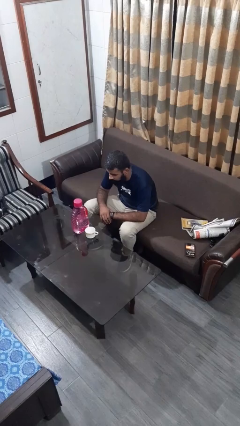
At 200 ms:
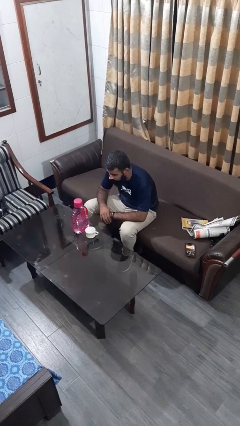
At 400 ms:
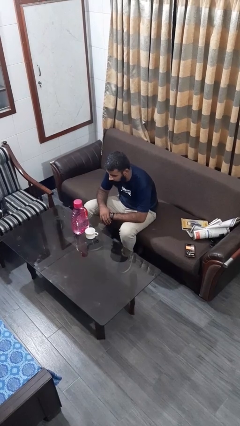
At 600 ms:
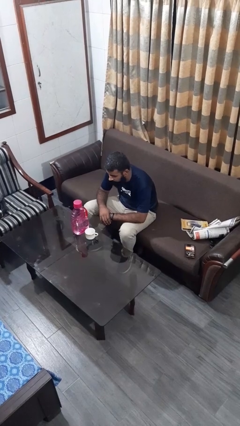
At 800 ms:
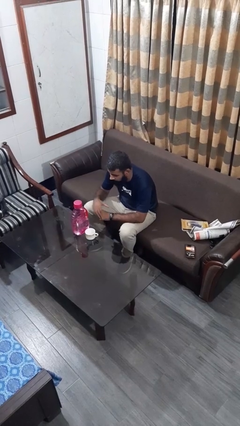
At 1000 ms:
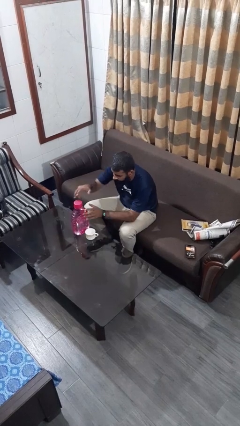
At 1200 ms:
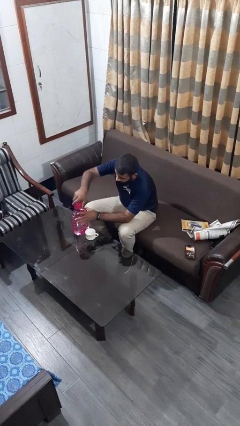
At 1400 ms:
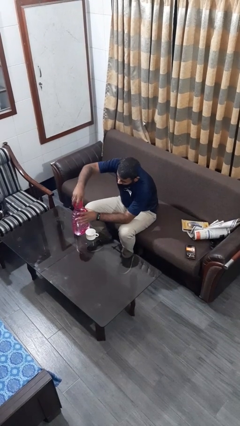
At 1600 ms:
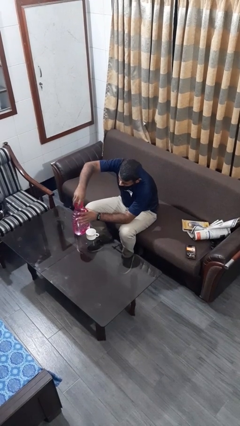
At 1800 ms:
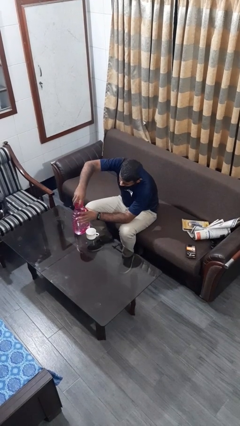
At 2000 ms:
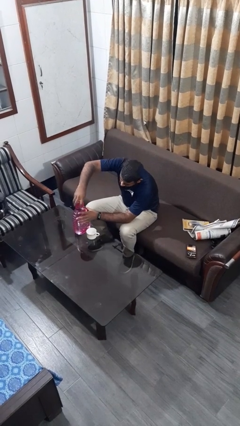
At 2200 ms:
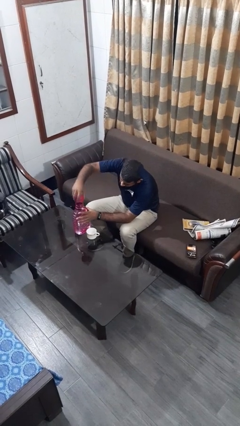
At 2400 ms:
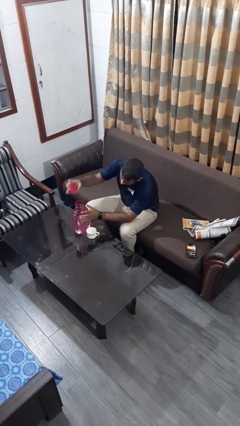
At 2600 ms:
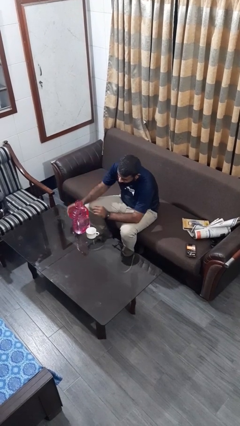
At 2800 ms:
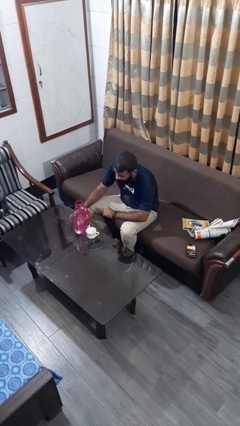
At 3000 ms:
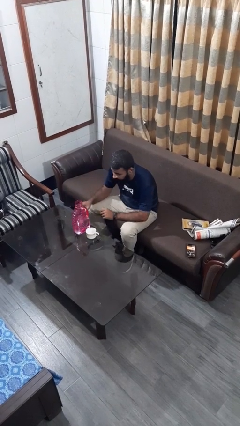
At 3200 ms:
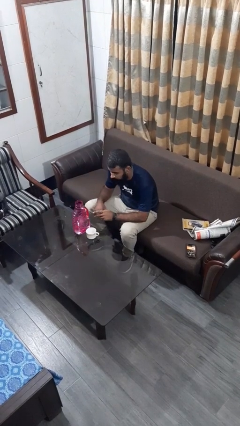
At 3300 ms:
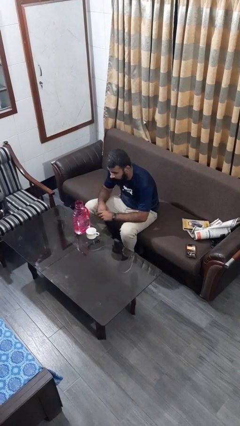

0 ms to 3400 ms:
person unscrews lid from bottle

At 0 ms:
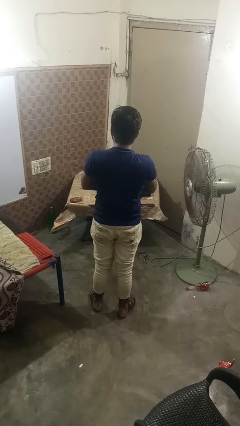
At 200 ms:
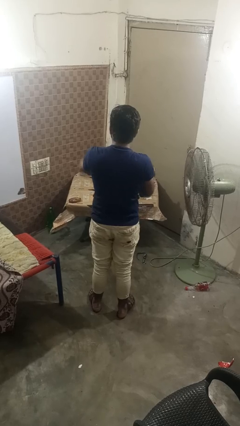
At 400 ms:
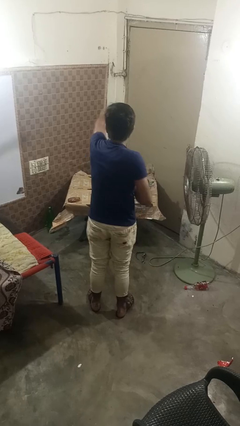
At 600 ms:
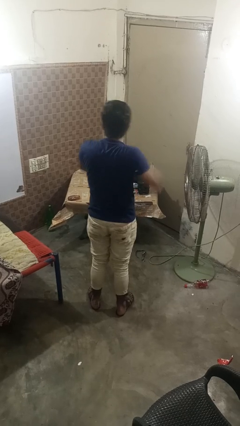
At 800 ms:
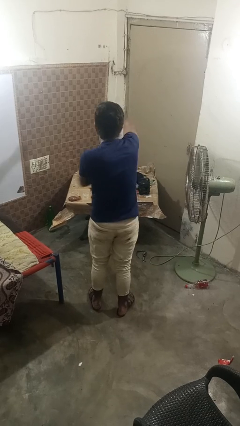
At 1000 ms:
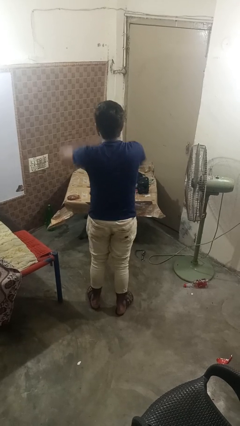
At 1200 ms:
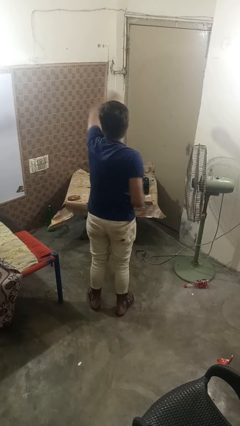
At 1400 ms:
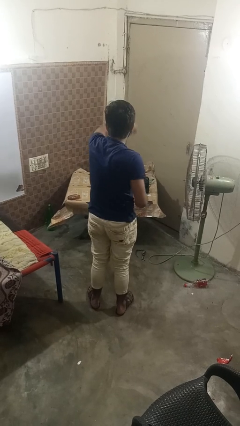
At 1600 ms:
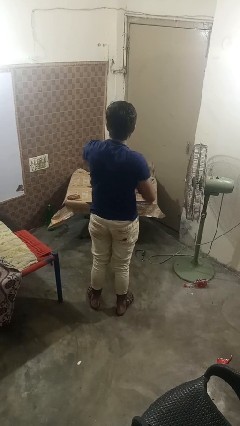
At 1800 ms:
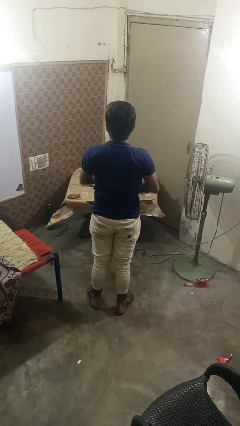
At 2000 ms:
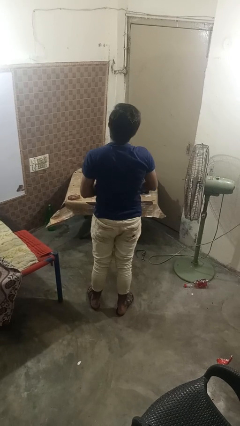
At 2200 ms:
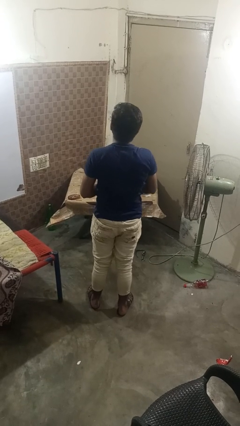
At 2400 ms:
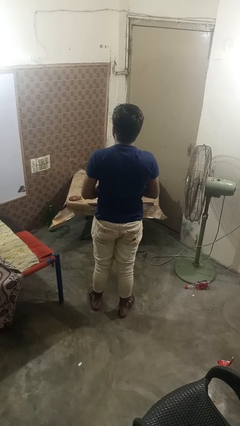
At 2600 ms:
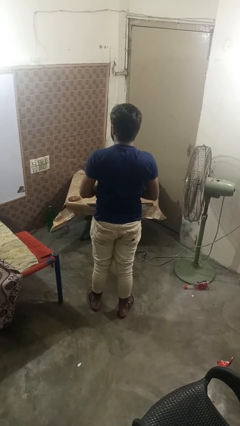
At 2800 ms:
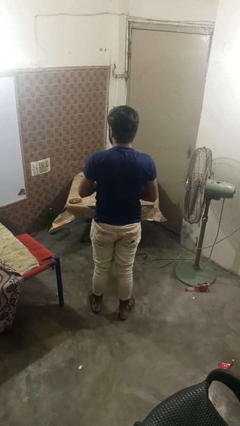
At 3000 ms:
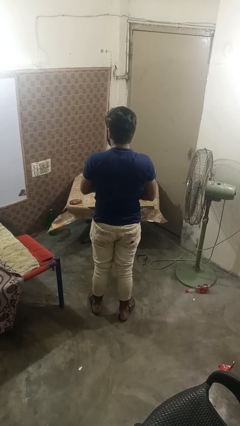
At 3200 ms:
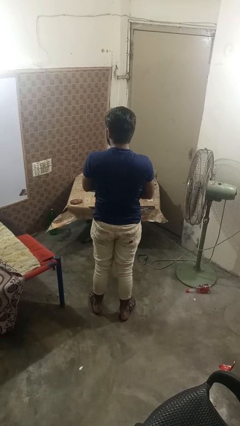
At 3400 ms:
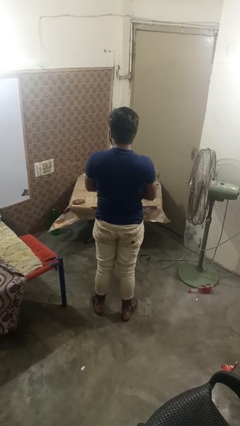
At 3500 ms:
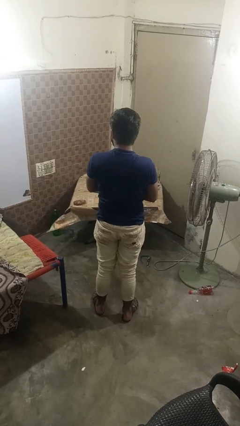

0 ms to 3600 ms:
person punches

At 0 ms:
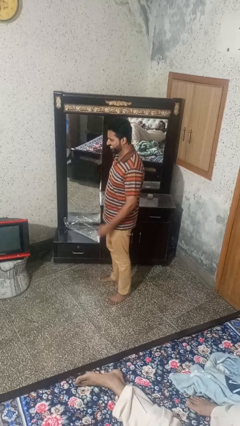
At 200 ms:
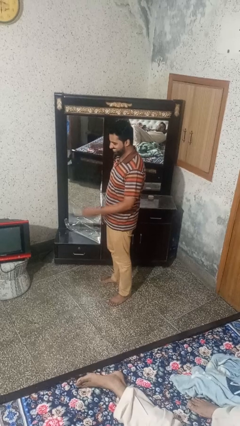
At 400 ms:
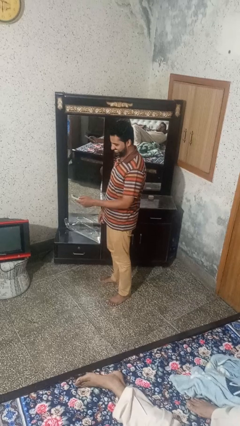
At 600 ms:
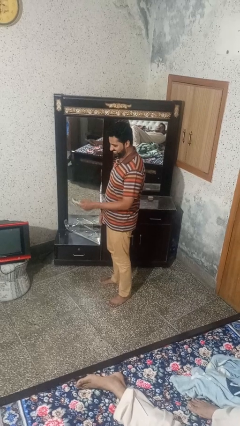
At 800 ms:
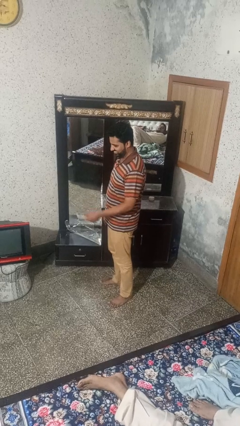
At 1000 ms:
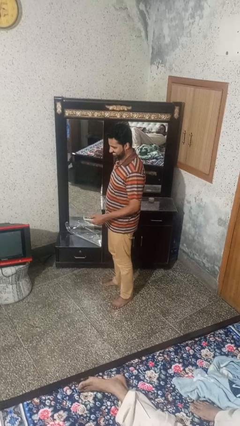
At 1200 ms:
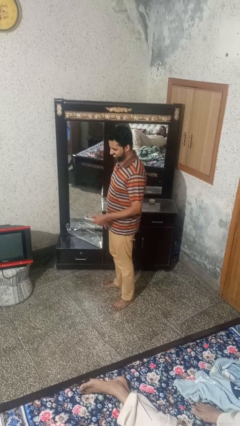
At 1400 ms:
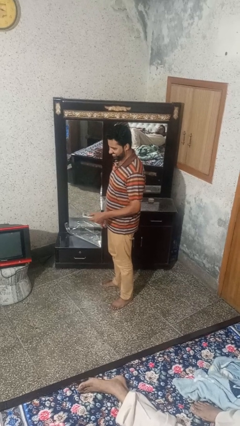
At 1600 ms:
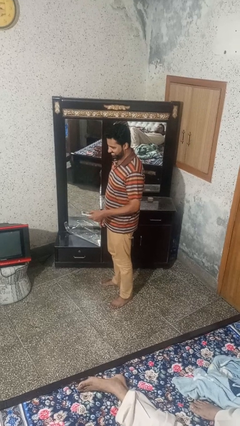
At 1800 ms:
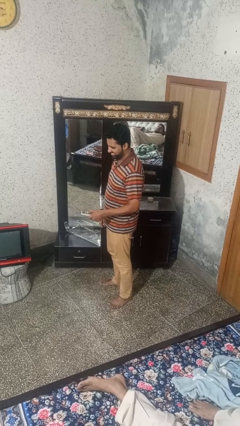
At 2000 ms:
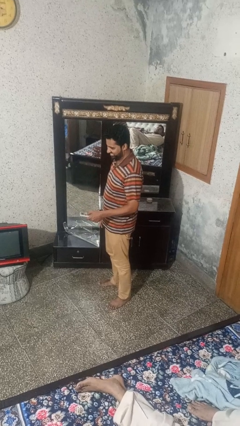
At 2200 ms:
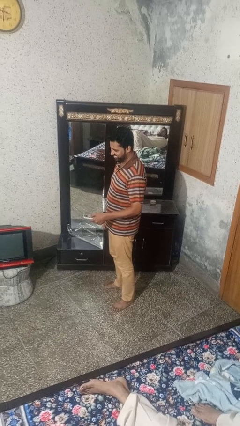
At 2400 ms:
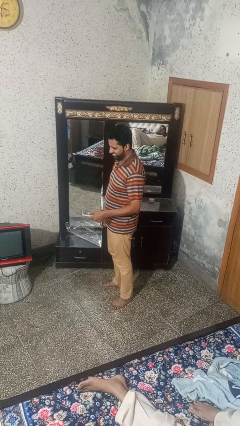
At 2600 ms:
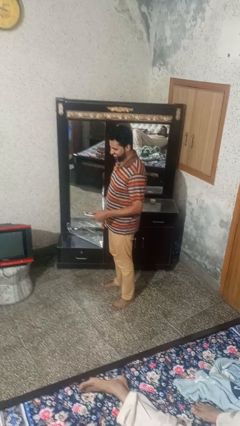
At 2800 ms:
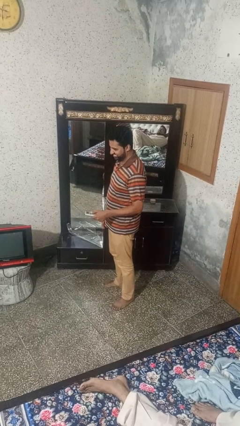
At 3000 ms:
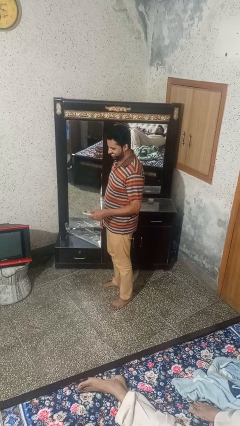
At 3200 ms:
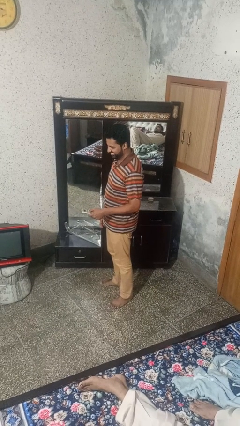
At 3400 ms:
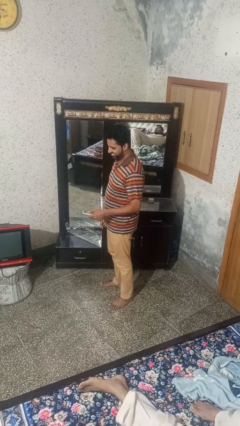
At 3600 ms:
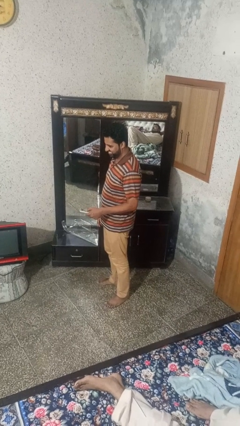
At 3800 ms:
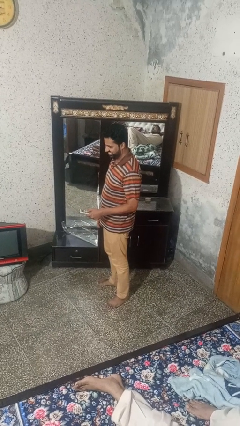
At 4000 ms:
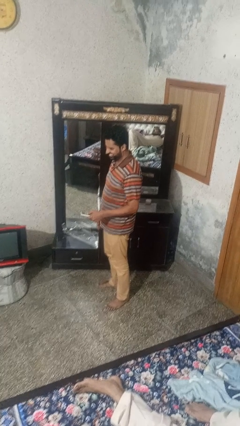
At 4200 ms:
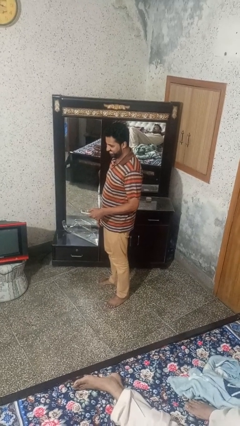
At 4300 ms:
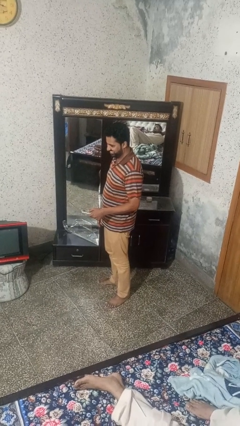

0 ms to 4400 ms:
person uses television remote

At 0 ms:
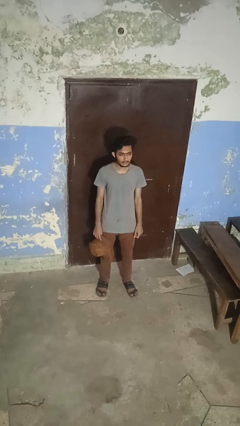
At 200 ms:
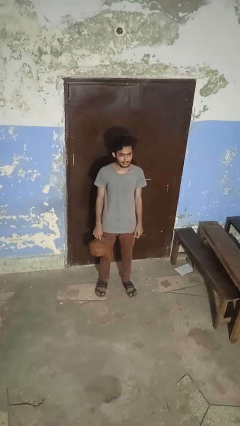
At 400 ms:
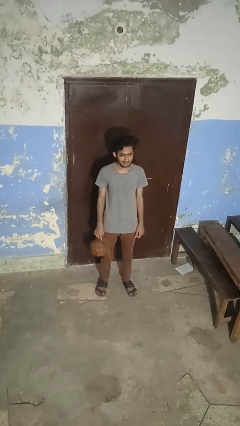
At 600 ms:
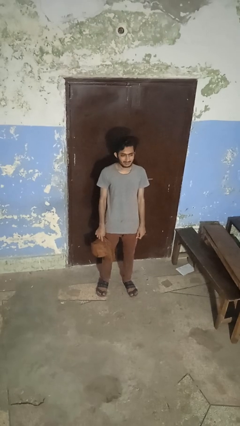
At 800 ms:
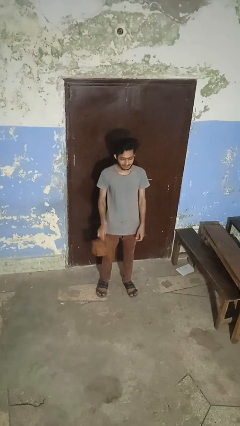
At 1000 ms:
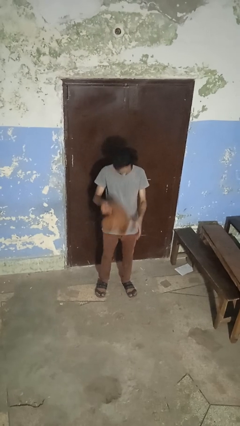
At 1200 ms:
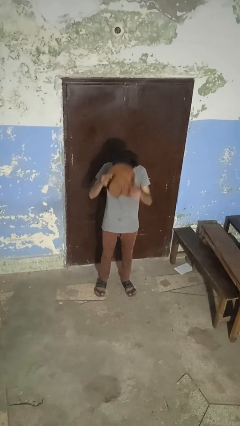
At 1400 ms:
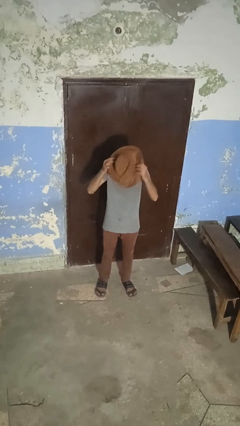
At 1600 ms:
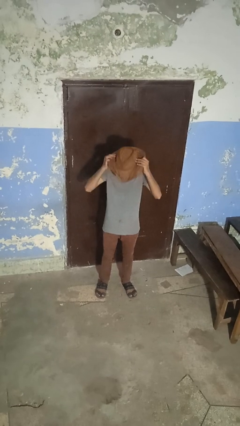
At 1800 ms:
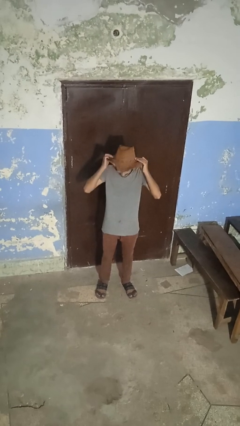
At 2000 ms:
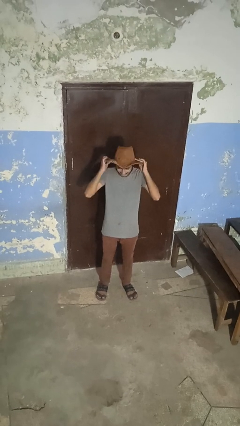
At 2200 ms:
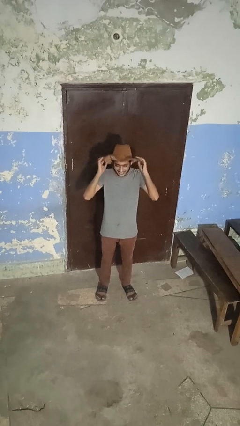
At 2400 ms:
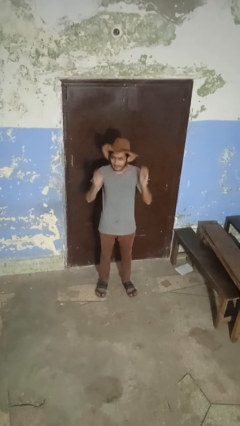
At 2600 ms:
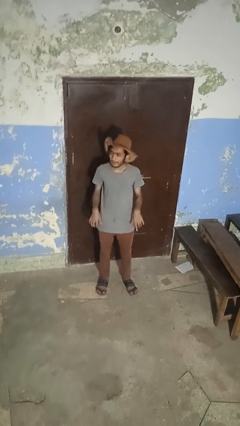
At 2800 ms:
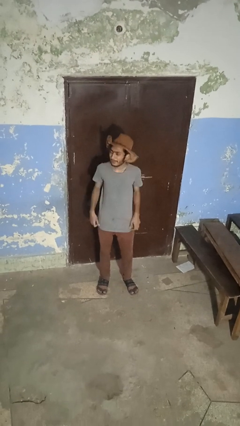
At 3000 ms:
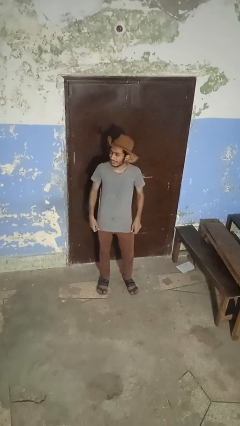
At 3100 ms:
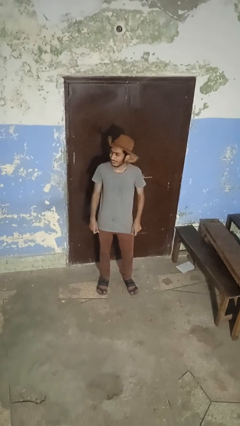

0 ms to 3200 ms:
person puts on hat

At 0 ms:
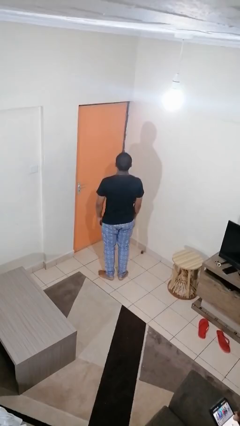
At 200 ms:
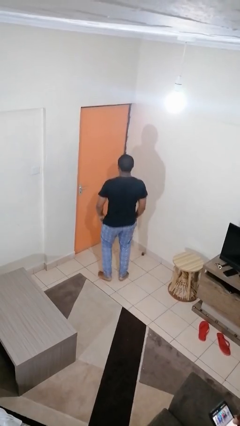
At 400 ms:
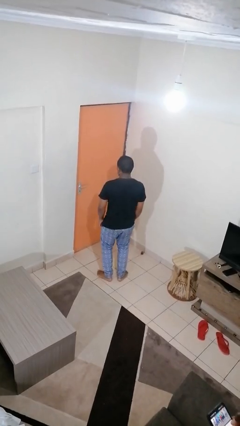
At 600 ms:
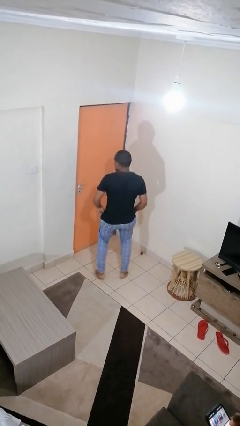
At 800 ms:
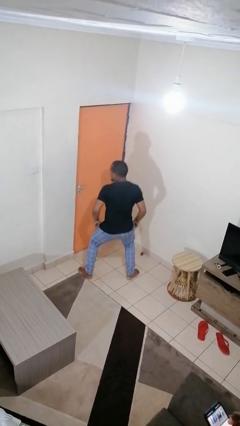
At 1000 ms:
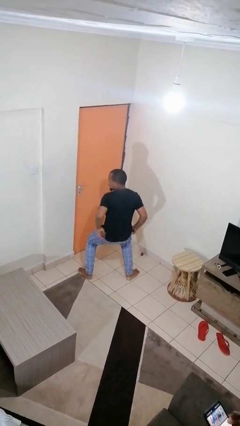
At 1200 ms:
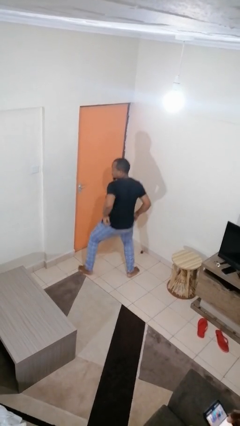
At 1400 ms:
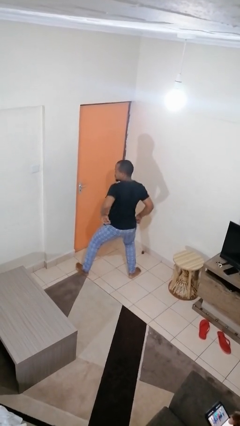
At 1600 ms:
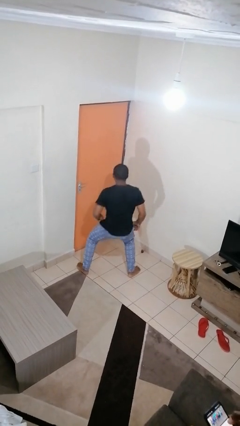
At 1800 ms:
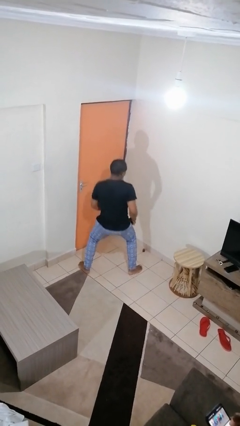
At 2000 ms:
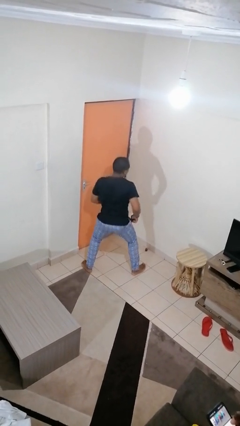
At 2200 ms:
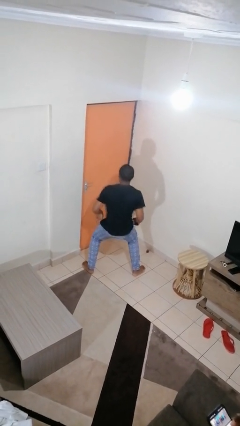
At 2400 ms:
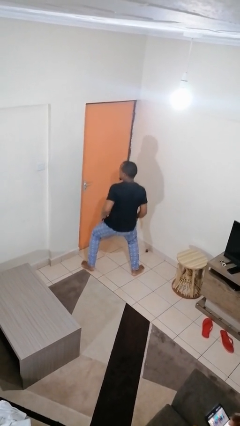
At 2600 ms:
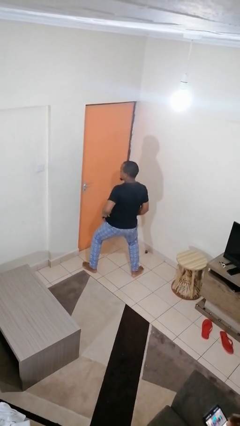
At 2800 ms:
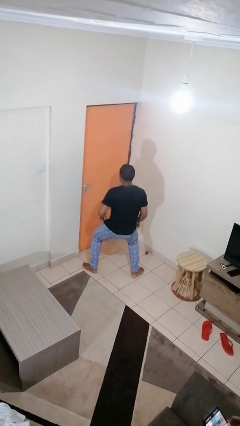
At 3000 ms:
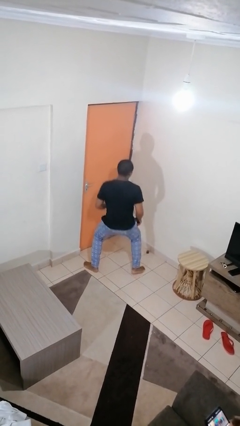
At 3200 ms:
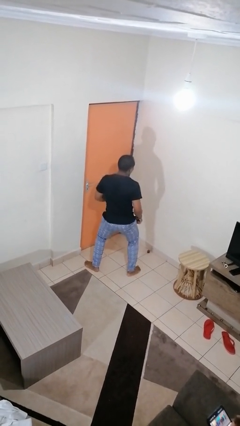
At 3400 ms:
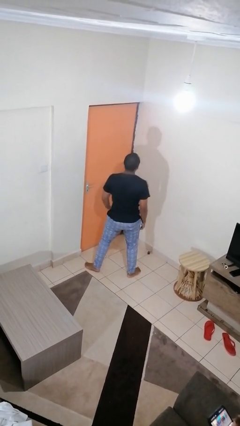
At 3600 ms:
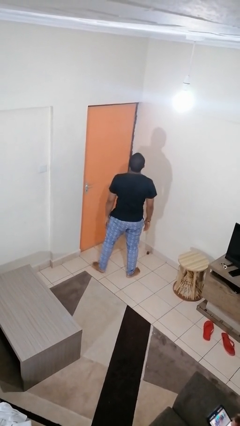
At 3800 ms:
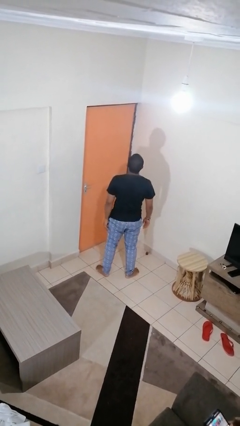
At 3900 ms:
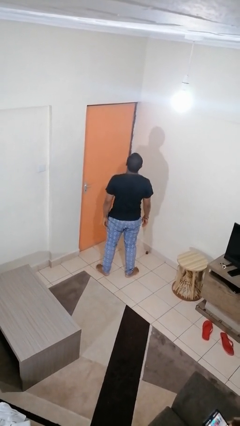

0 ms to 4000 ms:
person dances in place
